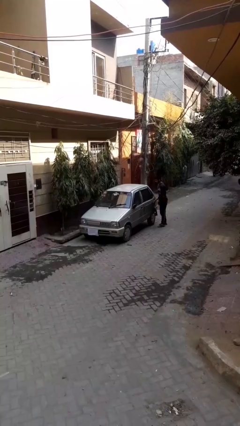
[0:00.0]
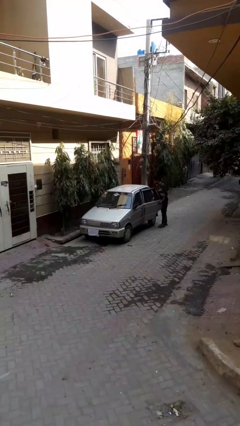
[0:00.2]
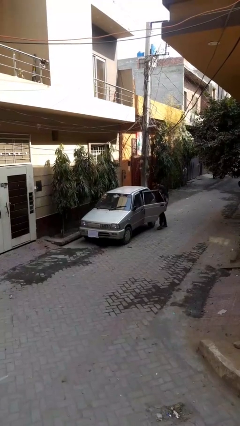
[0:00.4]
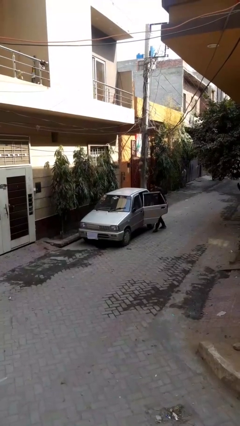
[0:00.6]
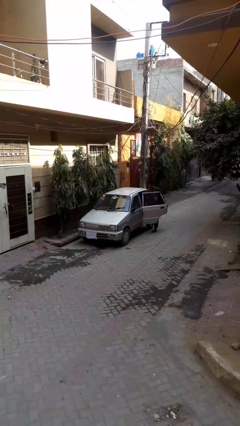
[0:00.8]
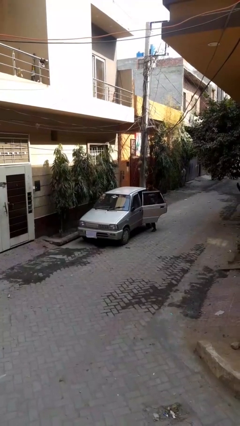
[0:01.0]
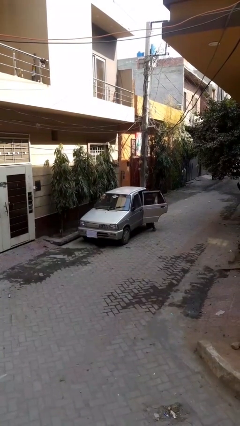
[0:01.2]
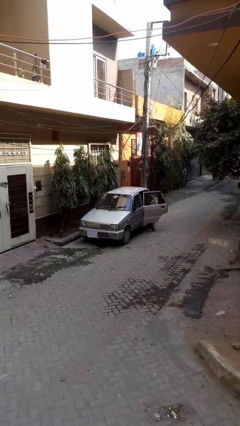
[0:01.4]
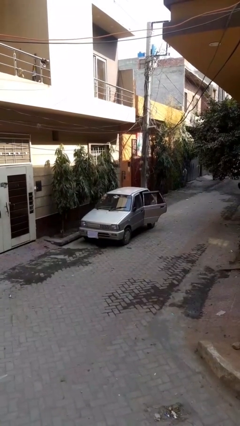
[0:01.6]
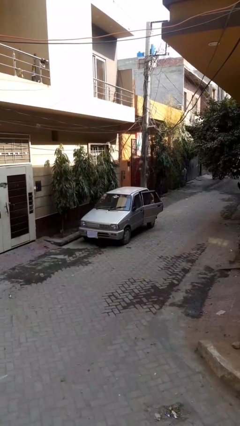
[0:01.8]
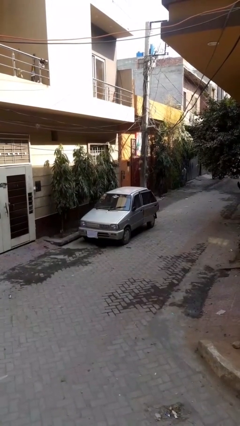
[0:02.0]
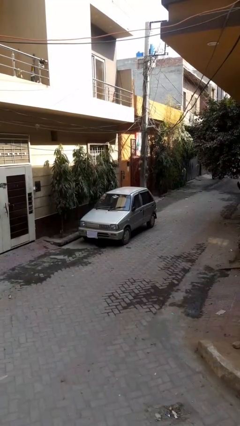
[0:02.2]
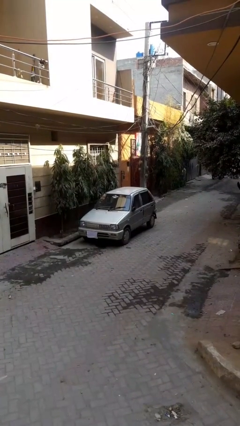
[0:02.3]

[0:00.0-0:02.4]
car picks up person

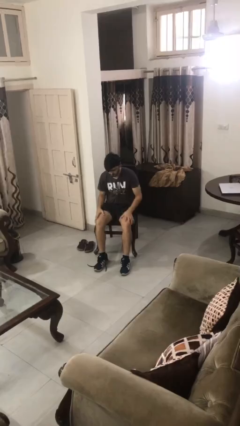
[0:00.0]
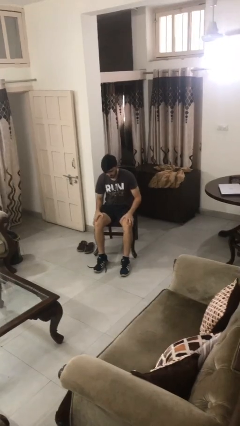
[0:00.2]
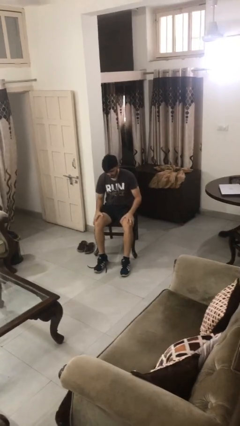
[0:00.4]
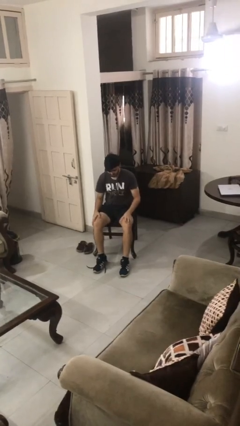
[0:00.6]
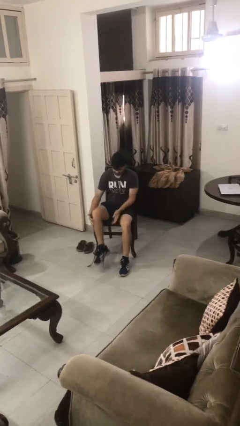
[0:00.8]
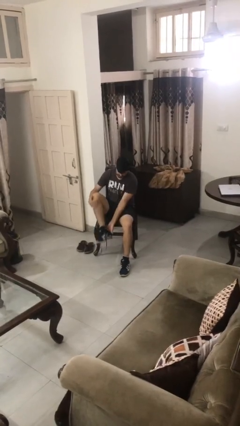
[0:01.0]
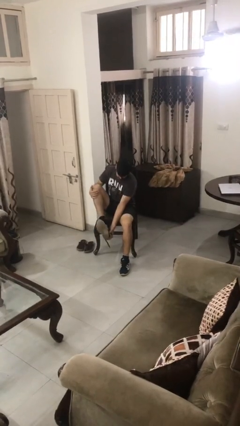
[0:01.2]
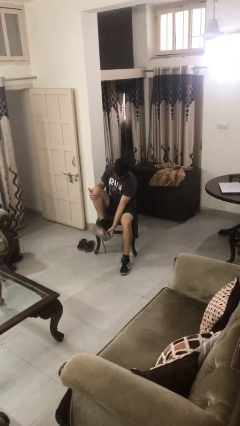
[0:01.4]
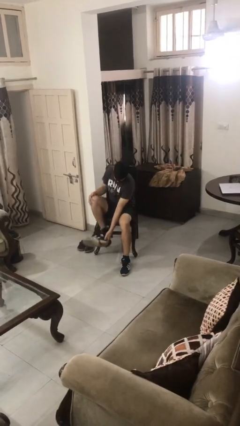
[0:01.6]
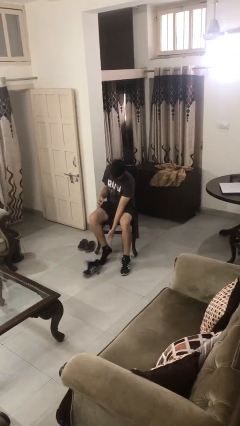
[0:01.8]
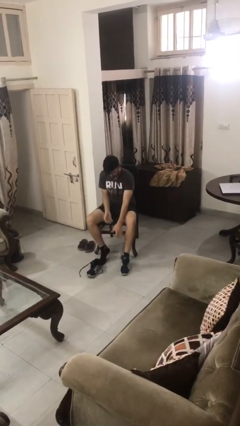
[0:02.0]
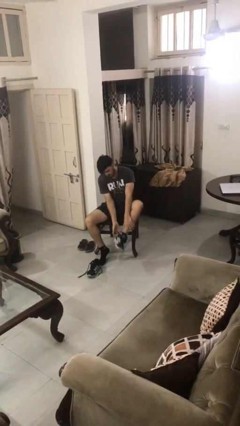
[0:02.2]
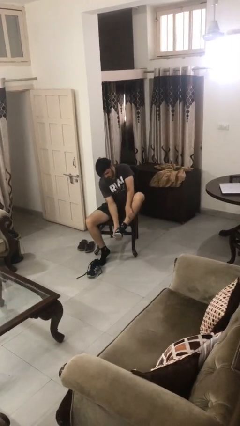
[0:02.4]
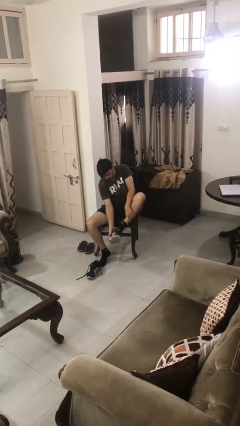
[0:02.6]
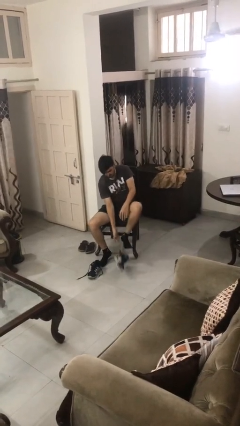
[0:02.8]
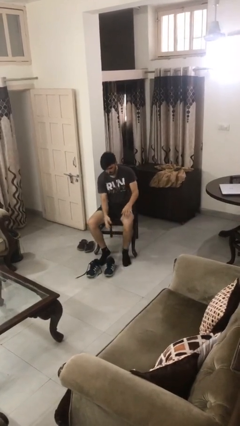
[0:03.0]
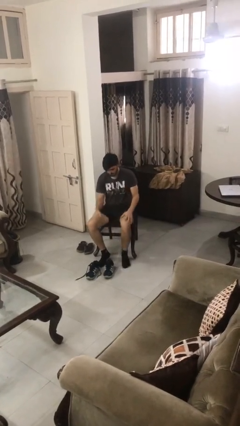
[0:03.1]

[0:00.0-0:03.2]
person takes off shoes

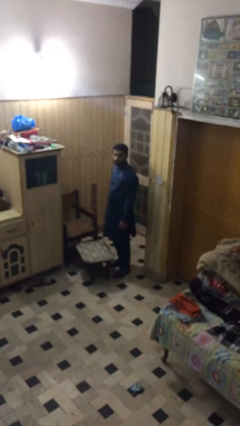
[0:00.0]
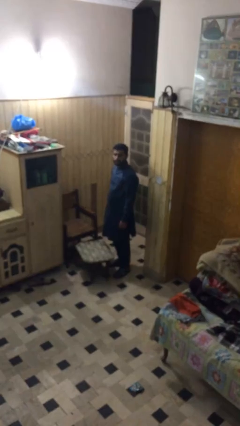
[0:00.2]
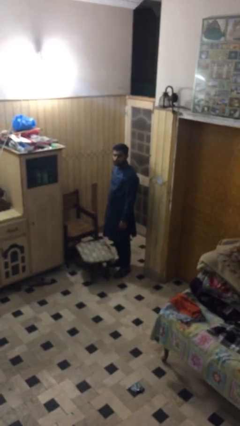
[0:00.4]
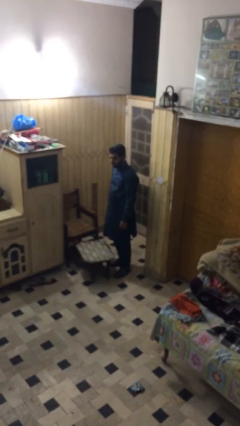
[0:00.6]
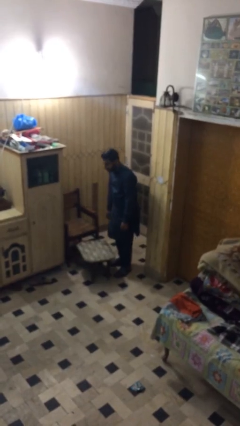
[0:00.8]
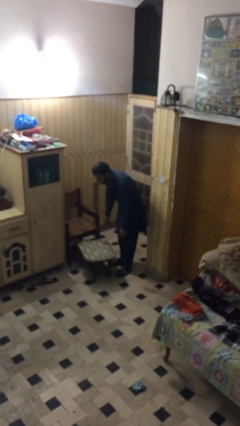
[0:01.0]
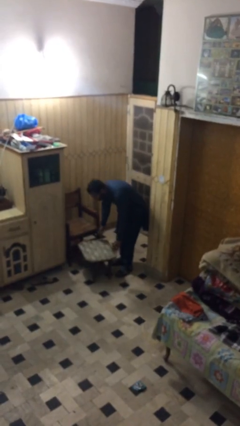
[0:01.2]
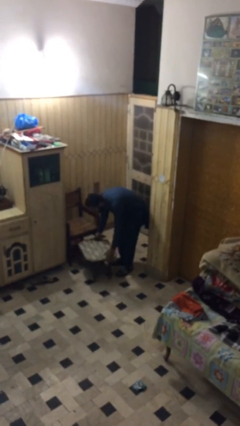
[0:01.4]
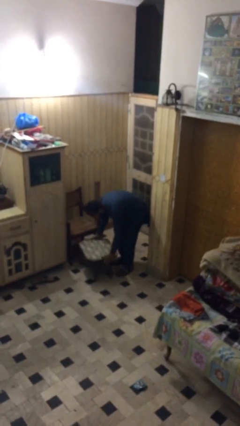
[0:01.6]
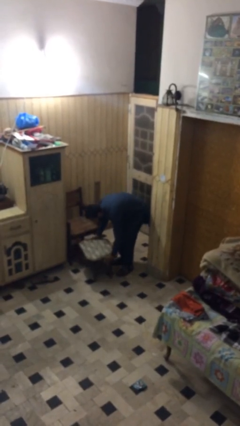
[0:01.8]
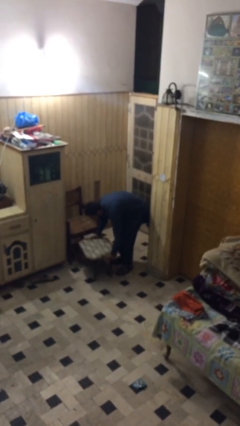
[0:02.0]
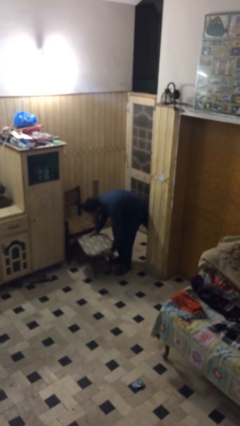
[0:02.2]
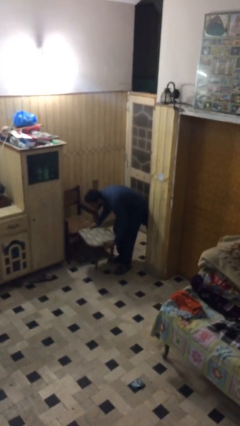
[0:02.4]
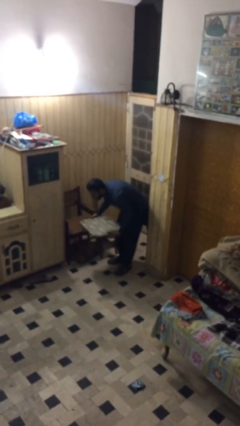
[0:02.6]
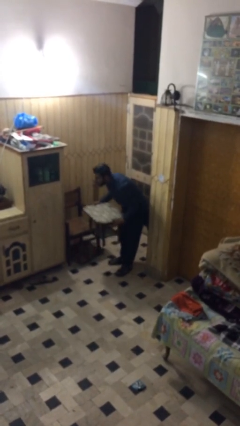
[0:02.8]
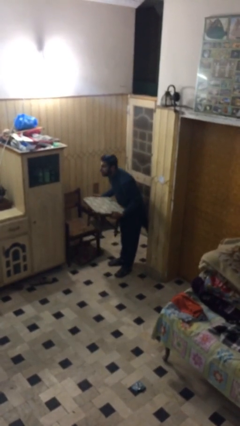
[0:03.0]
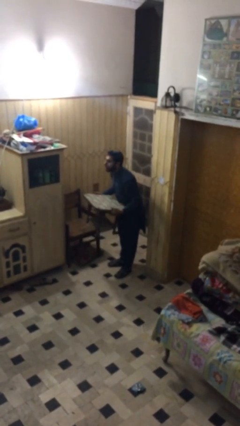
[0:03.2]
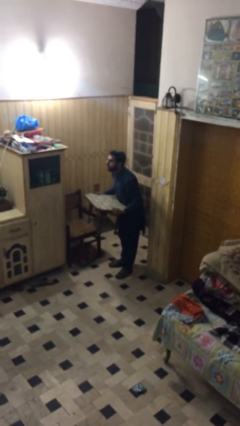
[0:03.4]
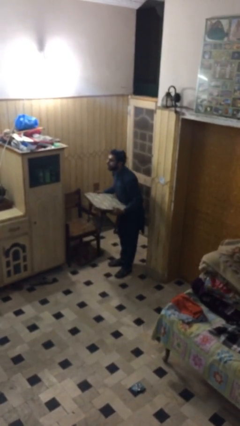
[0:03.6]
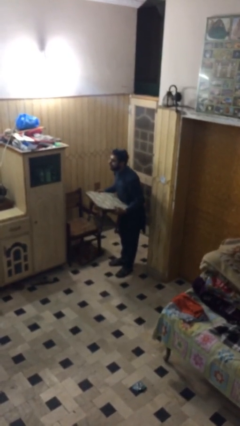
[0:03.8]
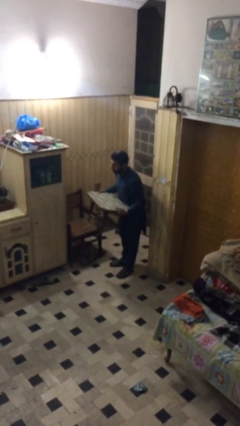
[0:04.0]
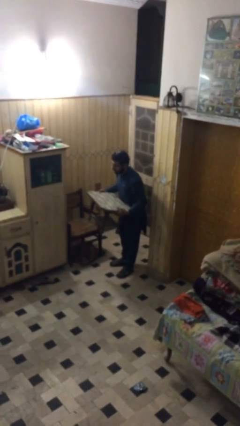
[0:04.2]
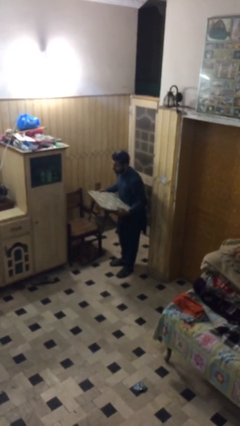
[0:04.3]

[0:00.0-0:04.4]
person picks up object from floor

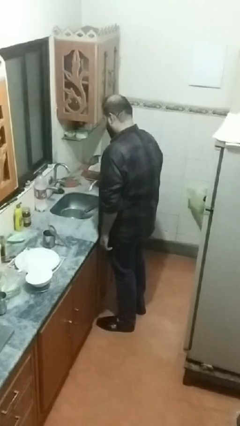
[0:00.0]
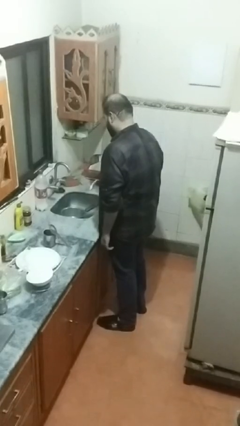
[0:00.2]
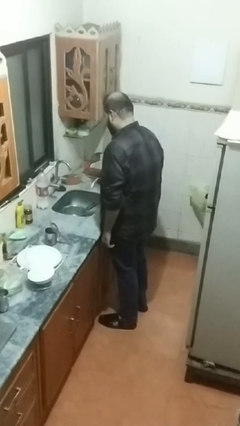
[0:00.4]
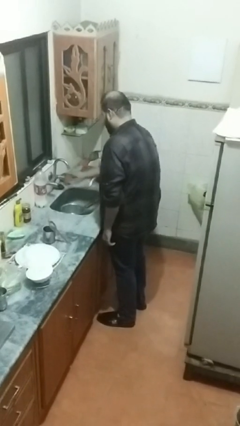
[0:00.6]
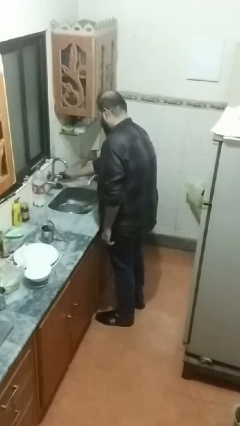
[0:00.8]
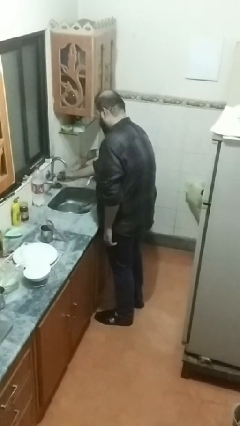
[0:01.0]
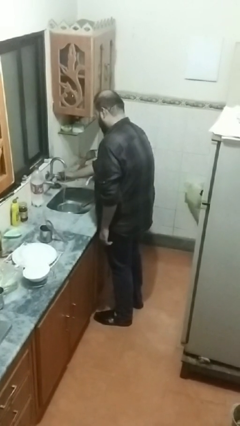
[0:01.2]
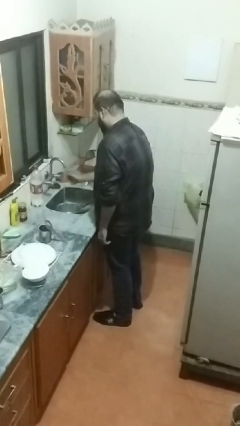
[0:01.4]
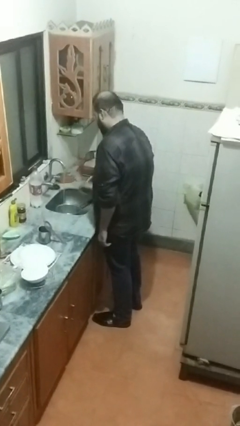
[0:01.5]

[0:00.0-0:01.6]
person turns on faucet

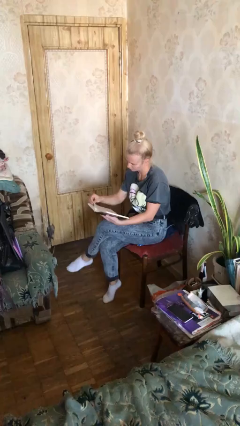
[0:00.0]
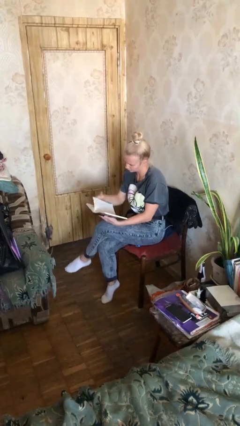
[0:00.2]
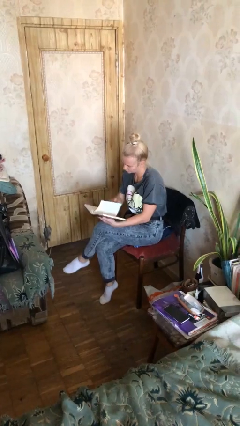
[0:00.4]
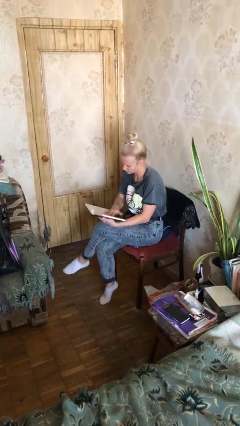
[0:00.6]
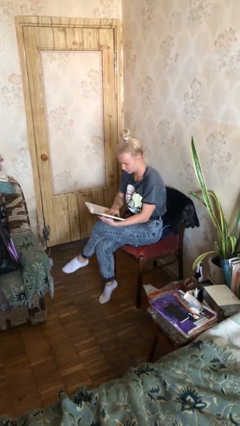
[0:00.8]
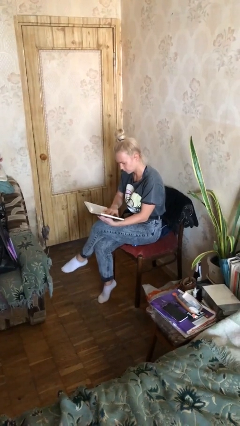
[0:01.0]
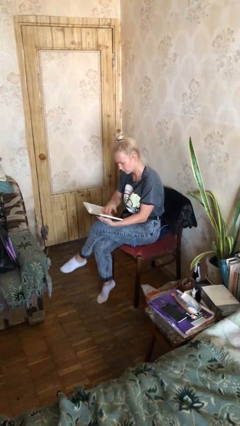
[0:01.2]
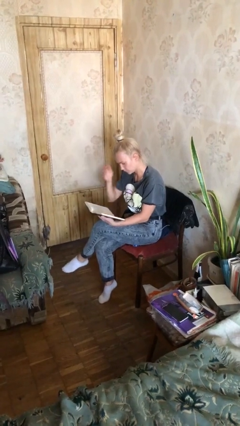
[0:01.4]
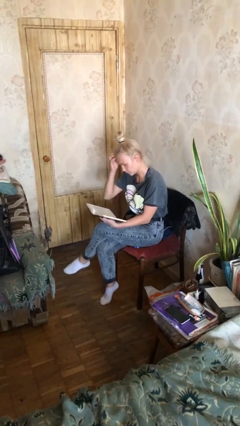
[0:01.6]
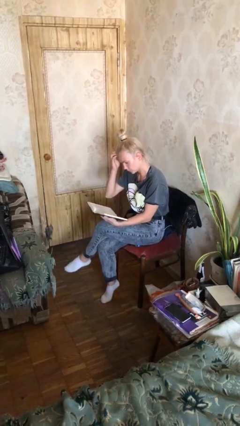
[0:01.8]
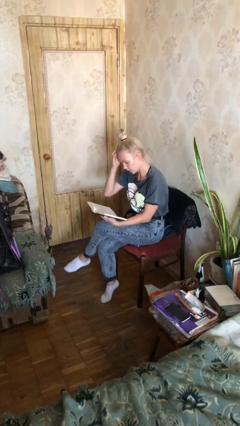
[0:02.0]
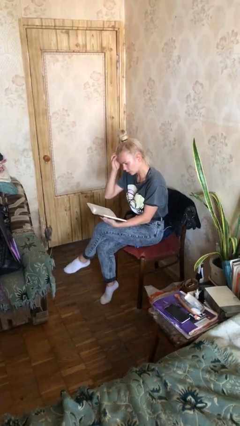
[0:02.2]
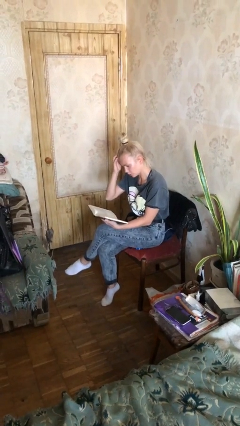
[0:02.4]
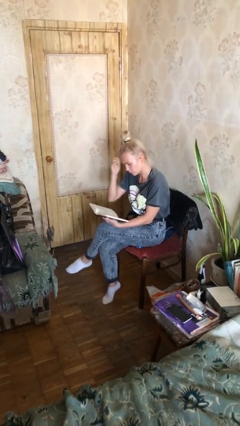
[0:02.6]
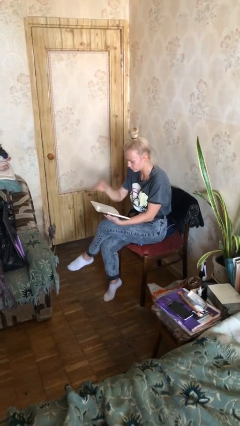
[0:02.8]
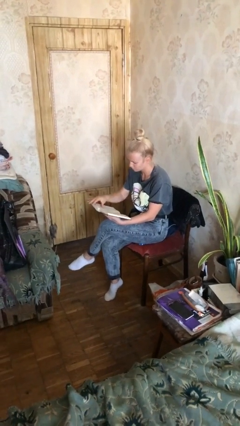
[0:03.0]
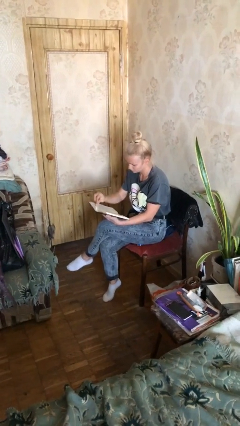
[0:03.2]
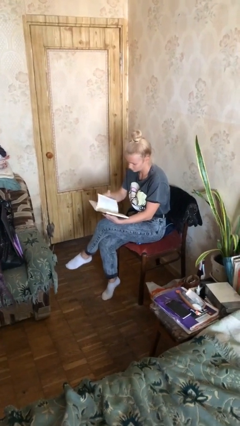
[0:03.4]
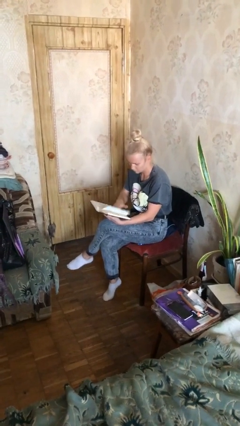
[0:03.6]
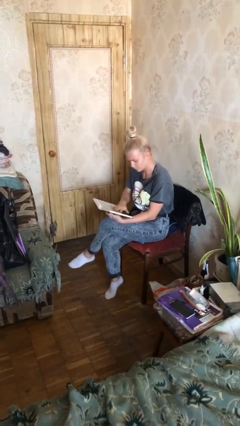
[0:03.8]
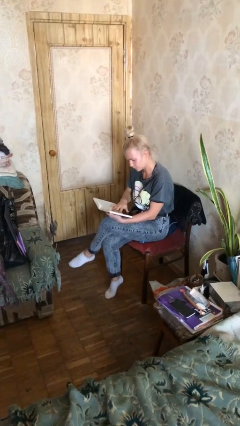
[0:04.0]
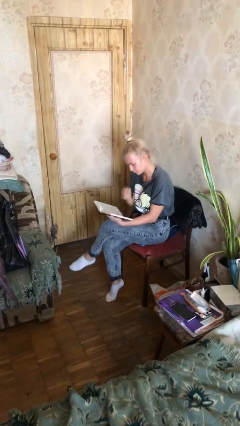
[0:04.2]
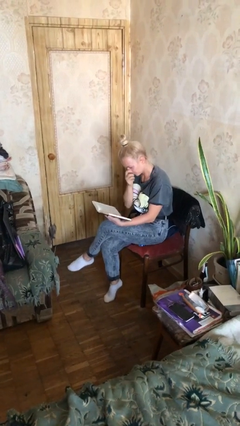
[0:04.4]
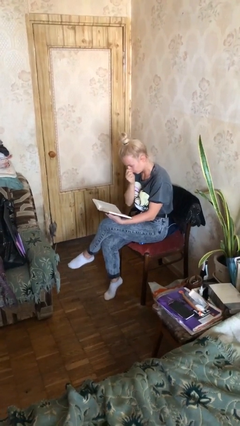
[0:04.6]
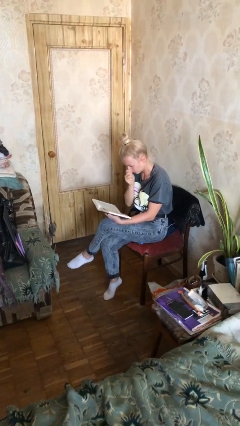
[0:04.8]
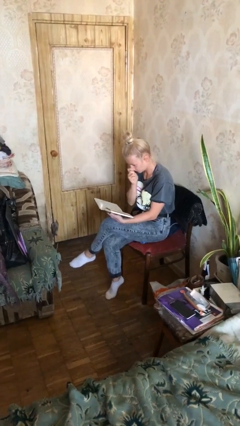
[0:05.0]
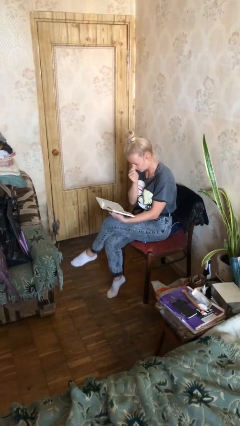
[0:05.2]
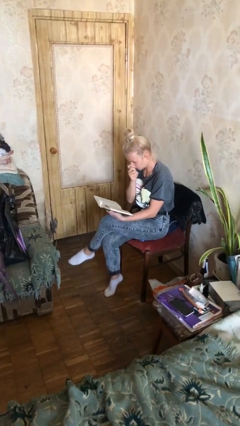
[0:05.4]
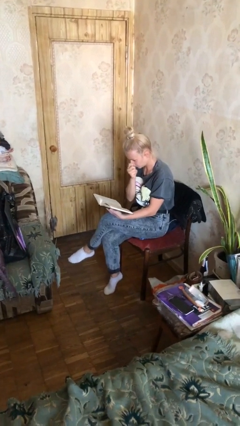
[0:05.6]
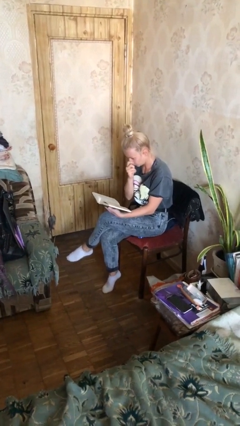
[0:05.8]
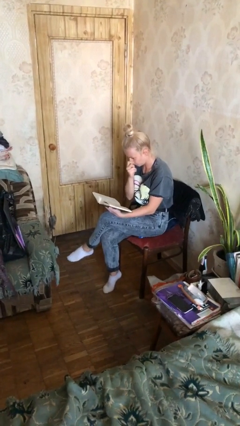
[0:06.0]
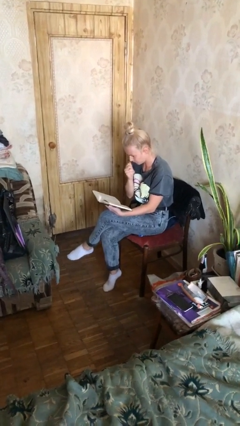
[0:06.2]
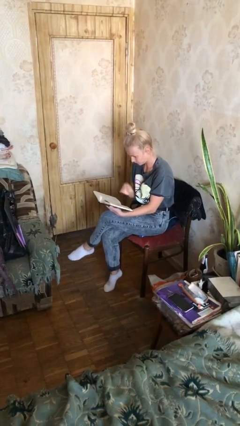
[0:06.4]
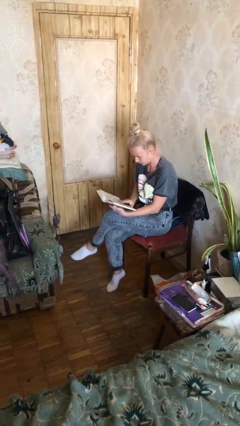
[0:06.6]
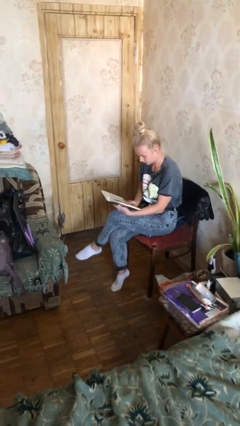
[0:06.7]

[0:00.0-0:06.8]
person reads document
